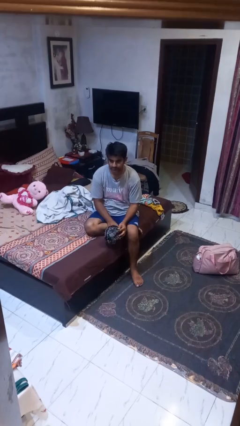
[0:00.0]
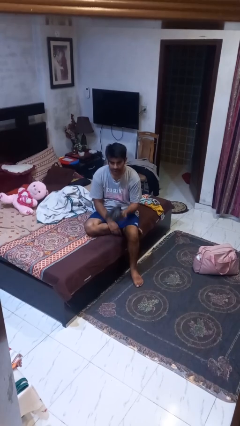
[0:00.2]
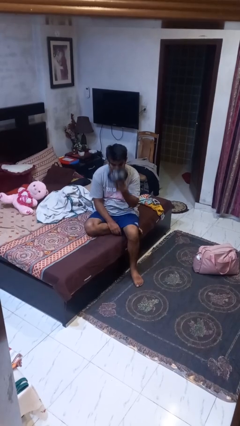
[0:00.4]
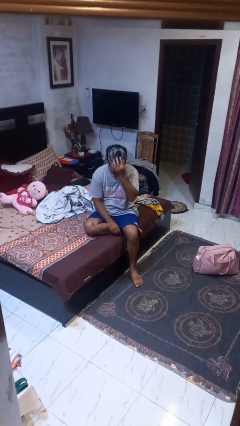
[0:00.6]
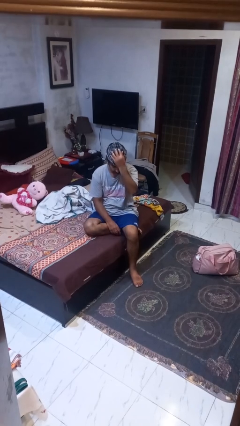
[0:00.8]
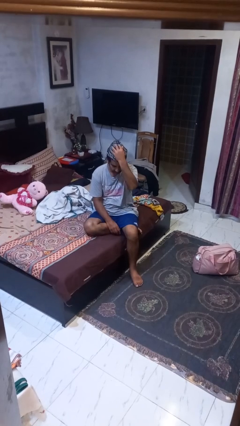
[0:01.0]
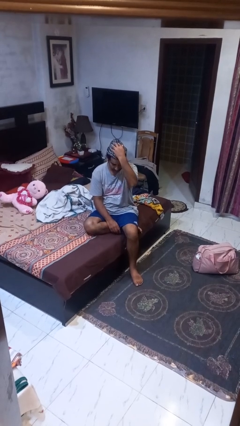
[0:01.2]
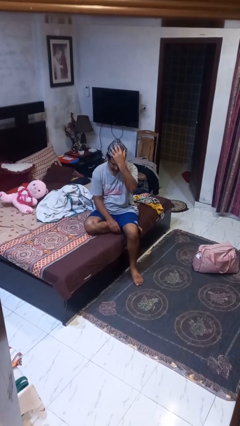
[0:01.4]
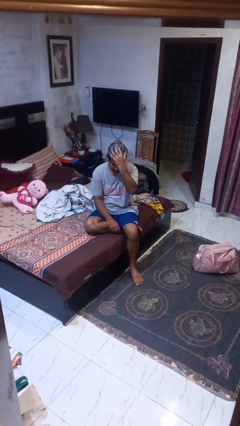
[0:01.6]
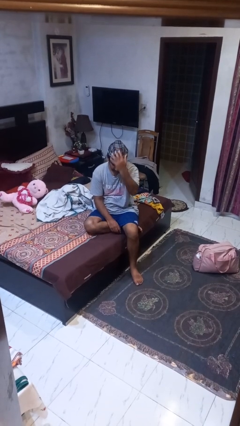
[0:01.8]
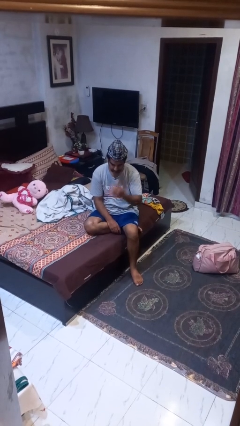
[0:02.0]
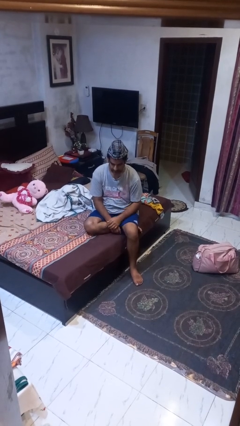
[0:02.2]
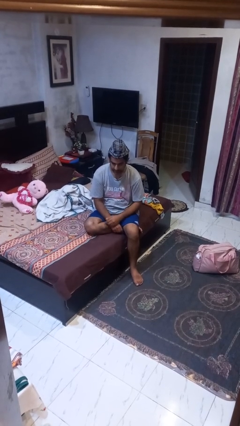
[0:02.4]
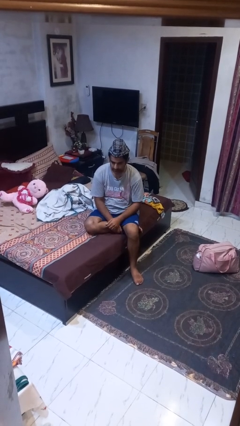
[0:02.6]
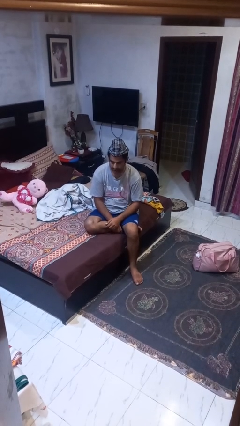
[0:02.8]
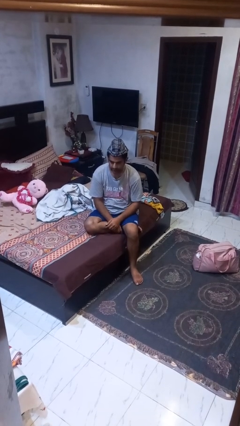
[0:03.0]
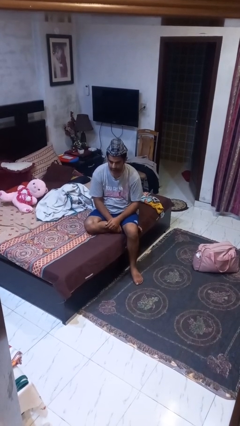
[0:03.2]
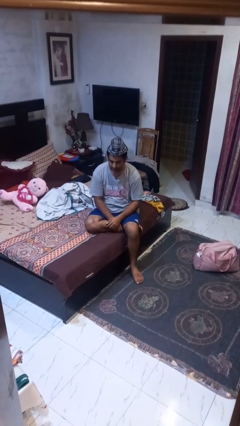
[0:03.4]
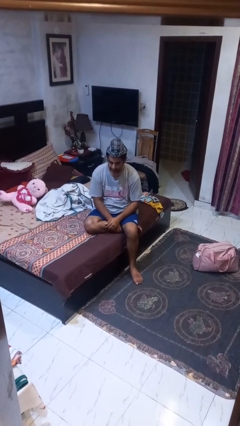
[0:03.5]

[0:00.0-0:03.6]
person puts on hat

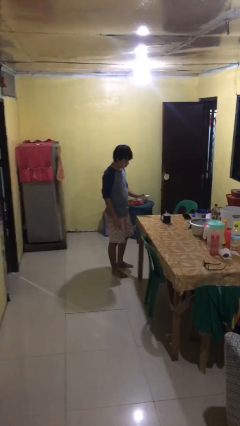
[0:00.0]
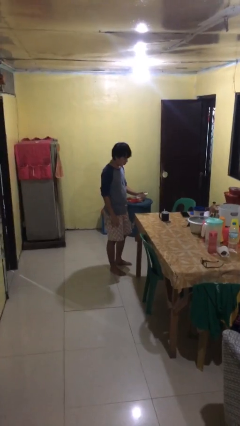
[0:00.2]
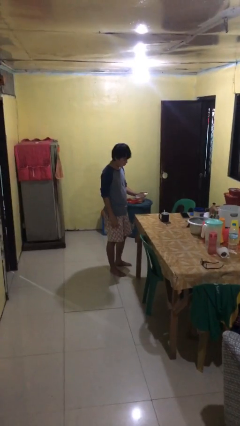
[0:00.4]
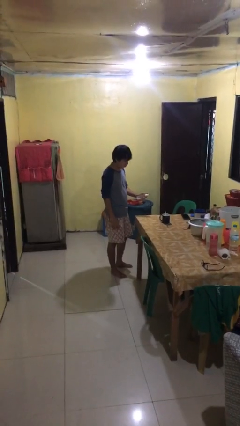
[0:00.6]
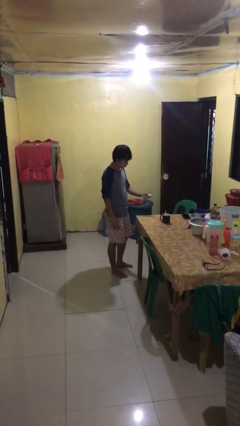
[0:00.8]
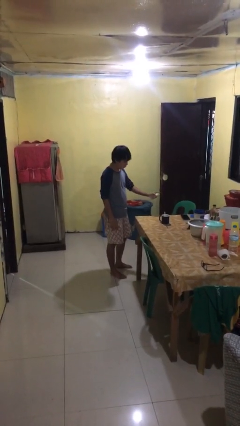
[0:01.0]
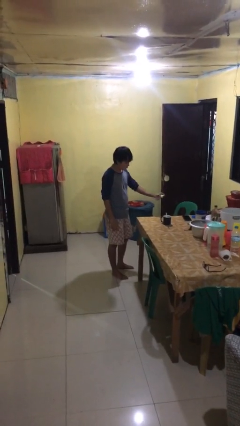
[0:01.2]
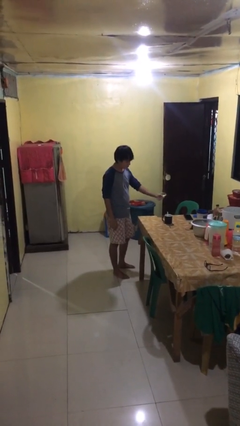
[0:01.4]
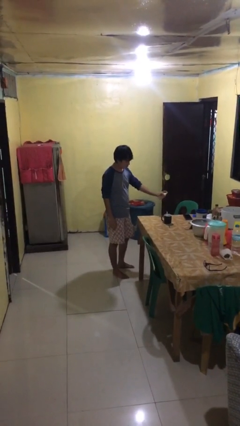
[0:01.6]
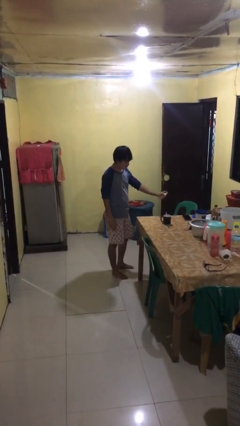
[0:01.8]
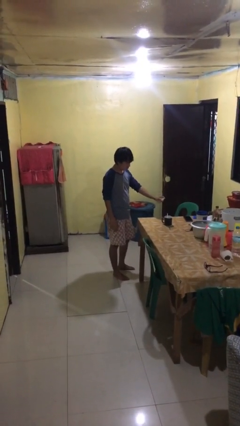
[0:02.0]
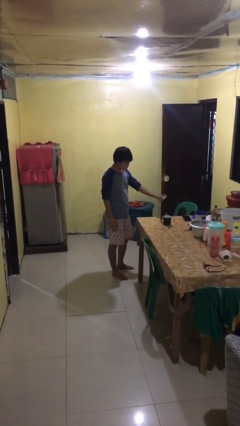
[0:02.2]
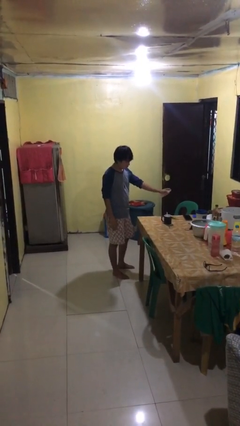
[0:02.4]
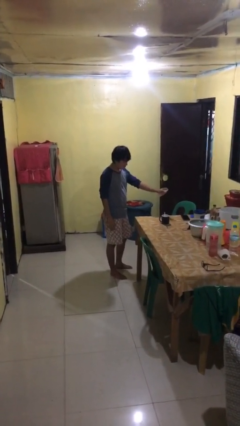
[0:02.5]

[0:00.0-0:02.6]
person sprays from bottle

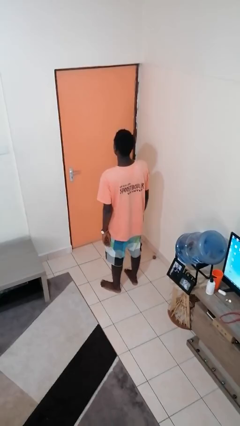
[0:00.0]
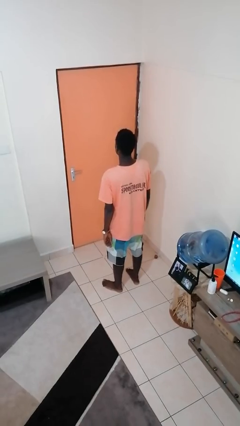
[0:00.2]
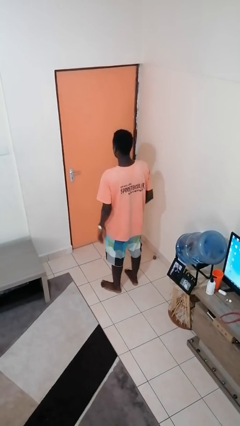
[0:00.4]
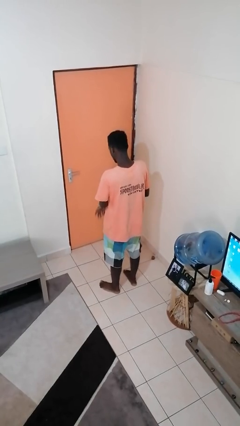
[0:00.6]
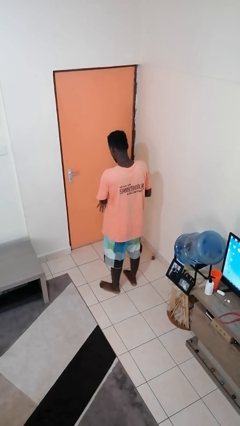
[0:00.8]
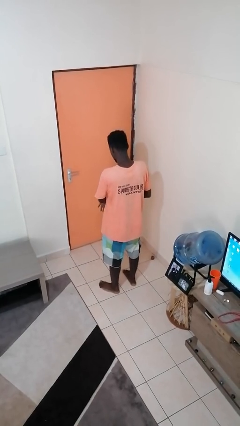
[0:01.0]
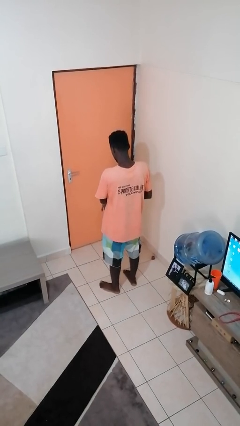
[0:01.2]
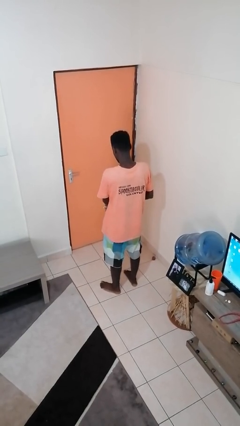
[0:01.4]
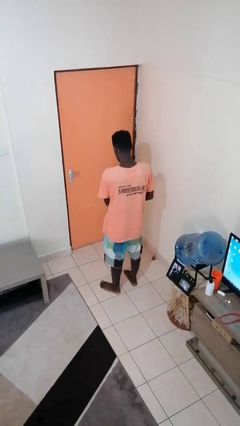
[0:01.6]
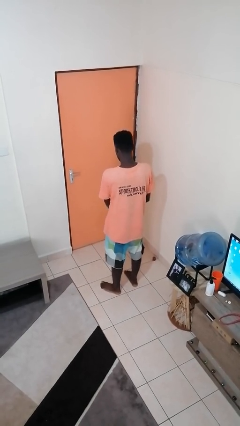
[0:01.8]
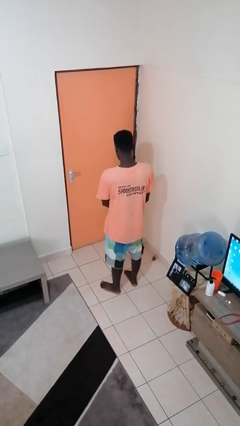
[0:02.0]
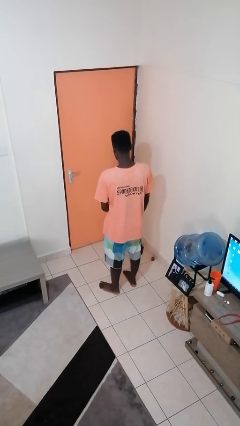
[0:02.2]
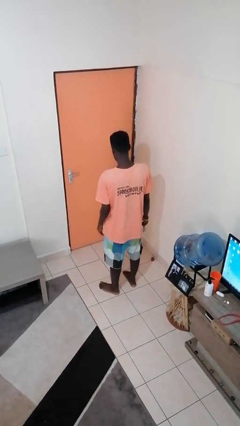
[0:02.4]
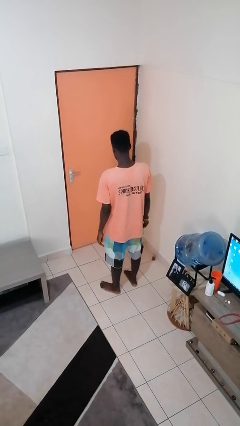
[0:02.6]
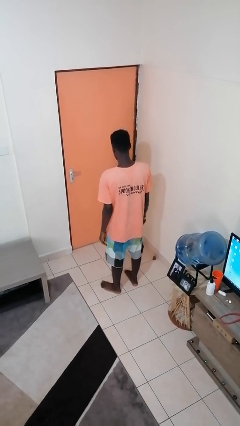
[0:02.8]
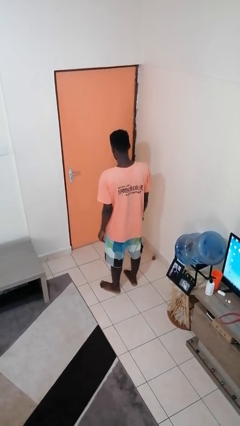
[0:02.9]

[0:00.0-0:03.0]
person takes off wristwatch

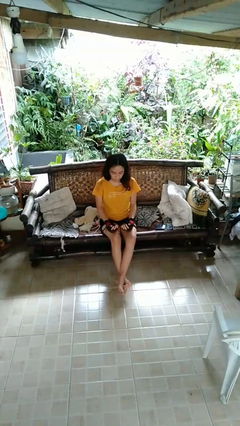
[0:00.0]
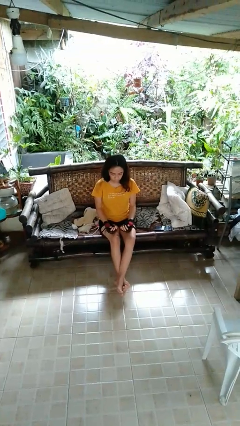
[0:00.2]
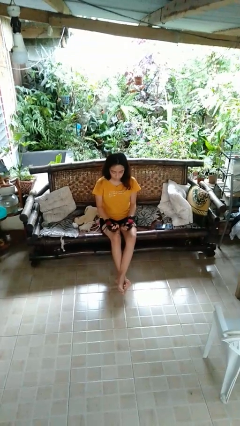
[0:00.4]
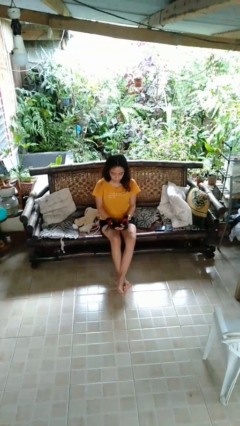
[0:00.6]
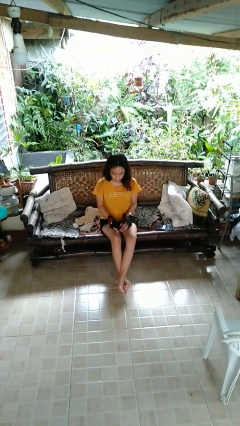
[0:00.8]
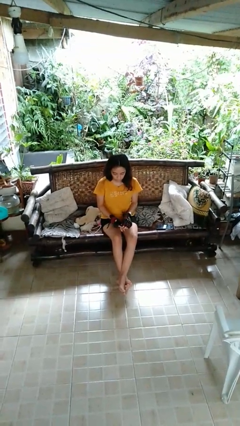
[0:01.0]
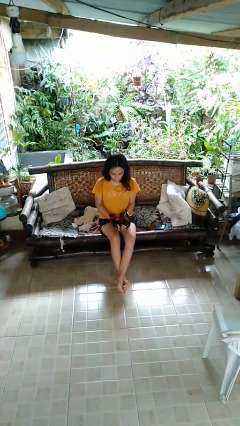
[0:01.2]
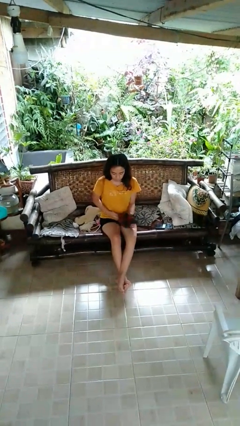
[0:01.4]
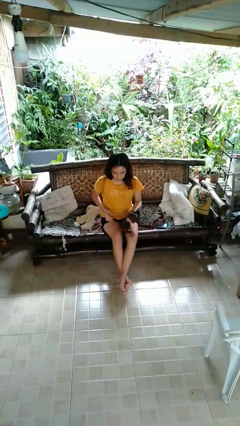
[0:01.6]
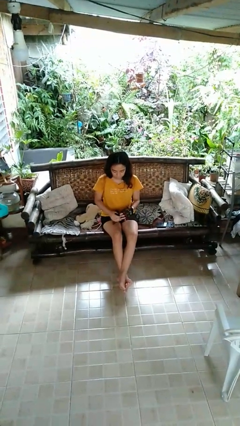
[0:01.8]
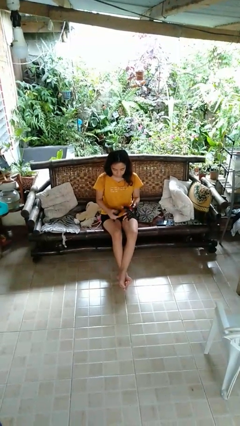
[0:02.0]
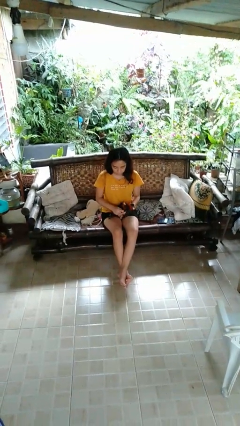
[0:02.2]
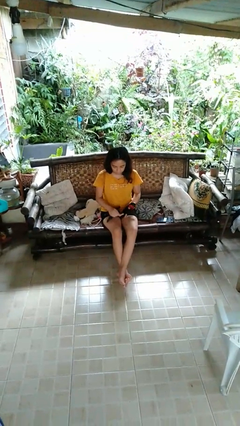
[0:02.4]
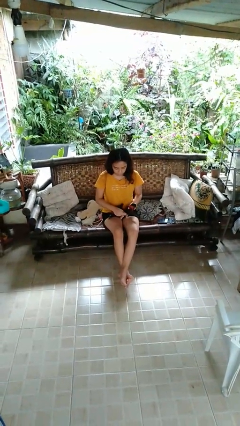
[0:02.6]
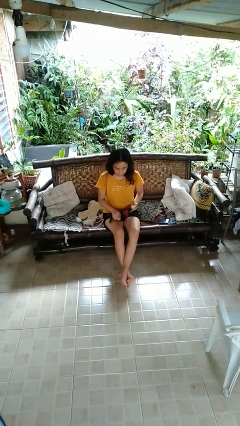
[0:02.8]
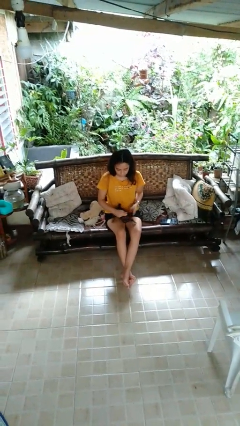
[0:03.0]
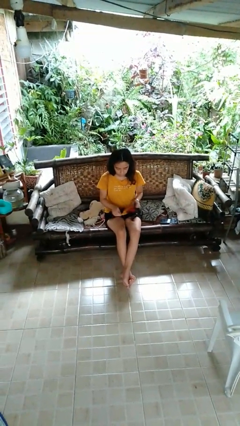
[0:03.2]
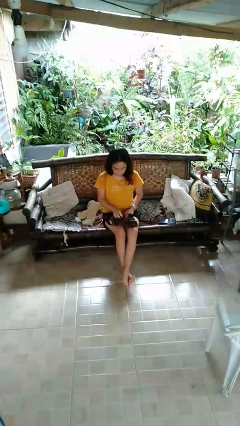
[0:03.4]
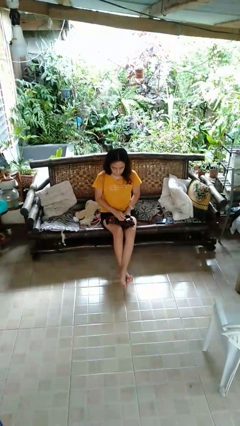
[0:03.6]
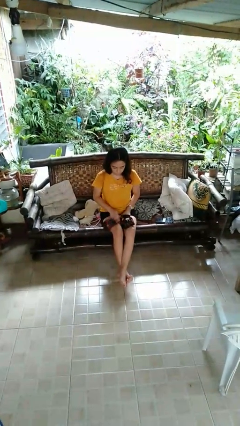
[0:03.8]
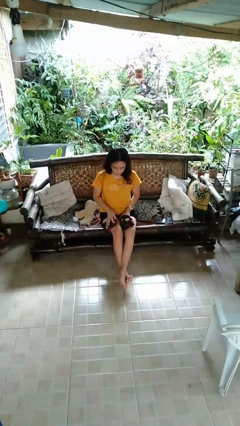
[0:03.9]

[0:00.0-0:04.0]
person takes off gloves

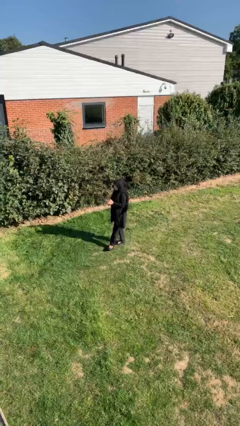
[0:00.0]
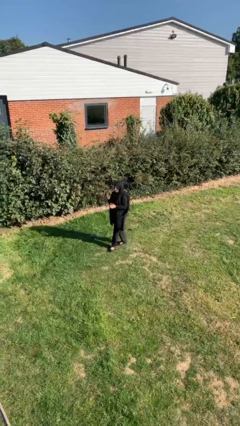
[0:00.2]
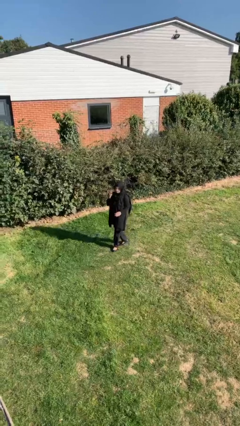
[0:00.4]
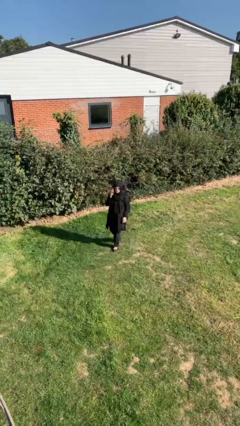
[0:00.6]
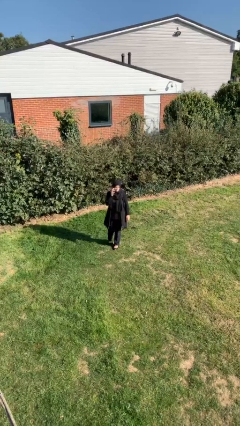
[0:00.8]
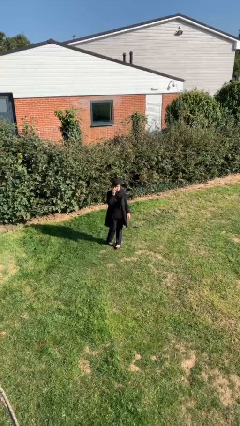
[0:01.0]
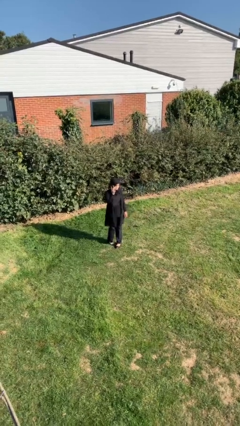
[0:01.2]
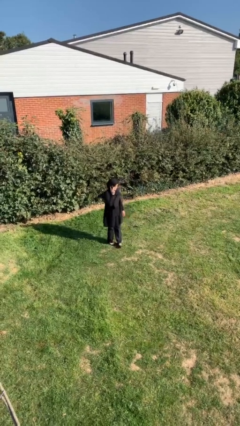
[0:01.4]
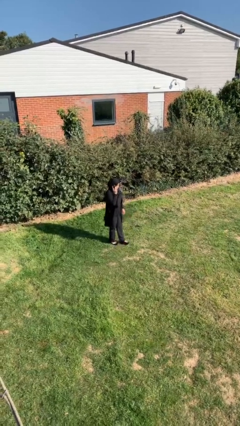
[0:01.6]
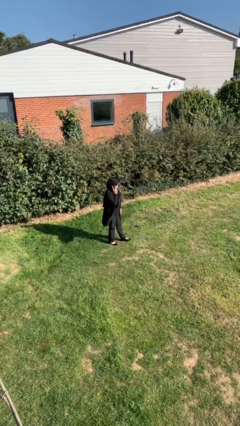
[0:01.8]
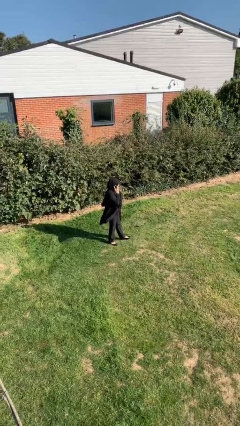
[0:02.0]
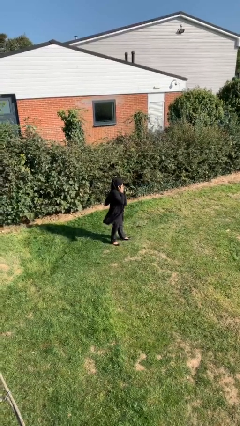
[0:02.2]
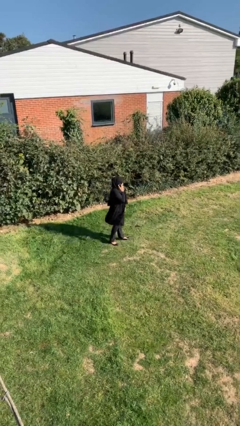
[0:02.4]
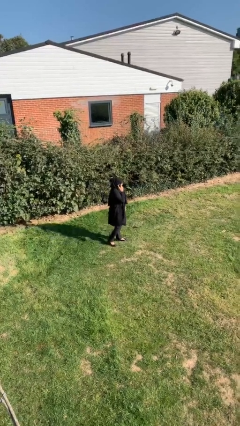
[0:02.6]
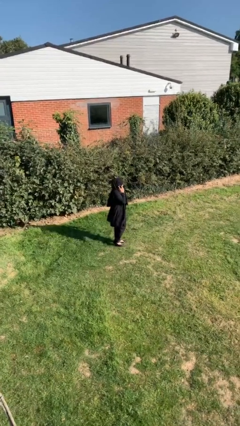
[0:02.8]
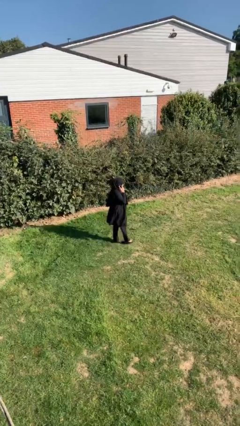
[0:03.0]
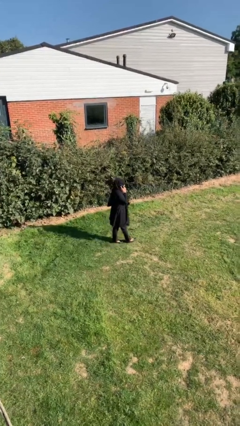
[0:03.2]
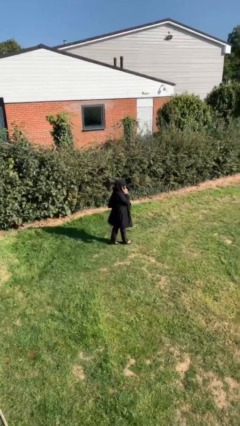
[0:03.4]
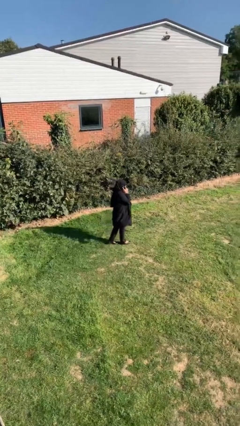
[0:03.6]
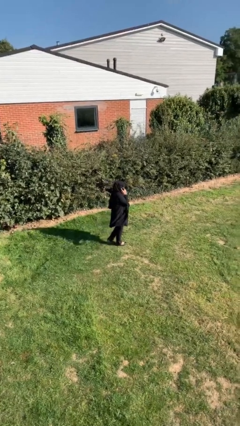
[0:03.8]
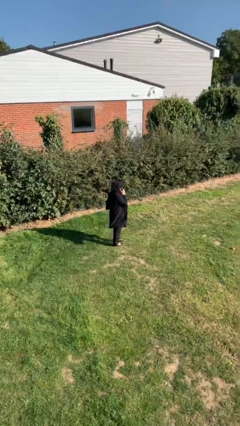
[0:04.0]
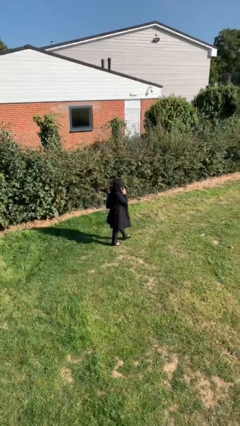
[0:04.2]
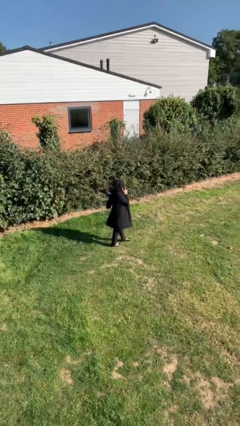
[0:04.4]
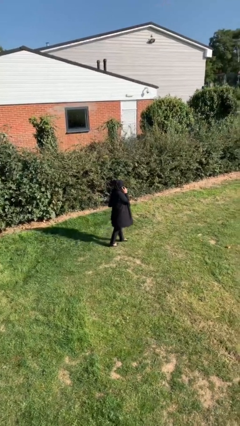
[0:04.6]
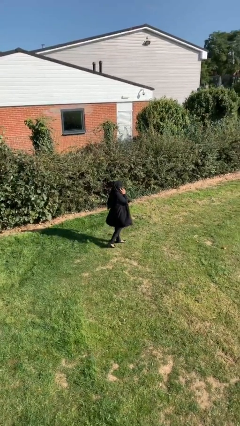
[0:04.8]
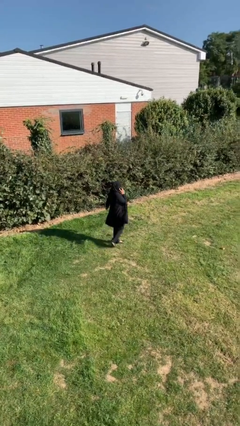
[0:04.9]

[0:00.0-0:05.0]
person talks on phone
